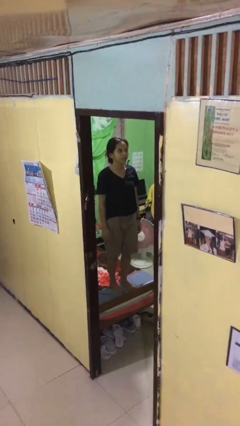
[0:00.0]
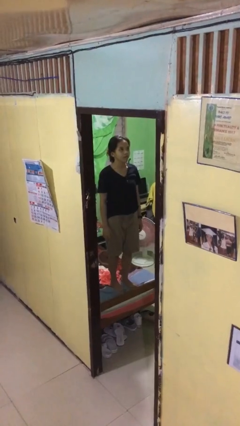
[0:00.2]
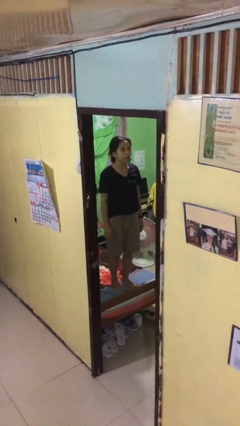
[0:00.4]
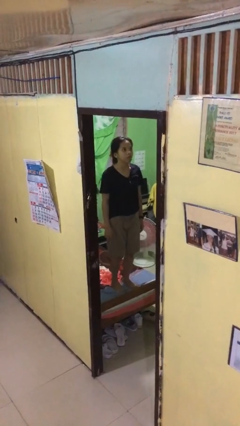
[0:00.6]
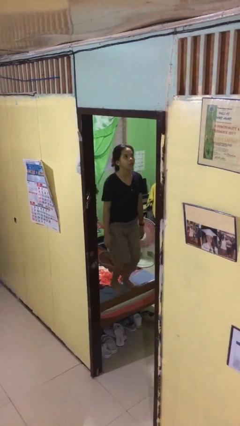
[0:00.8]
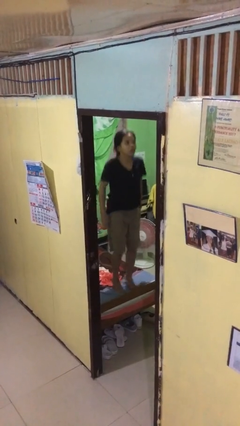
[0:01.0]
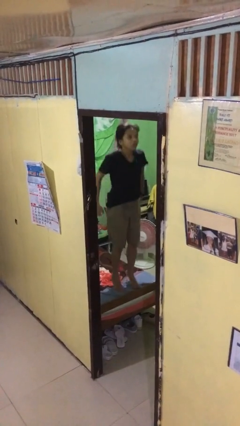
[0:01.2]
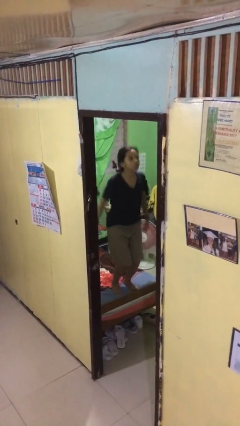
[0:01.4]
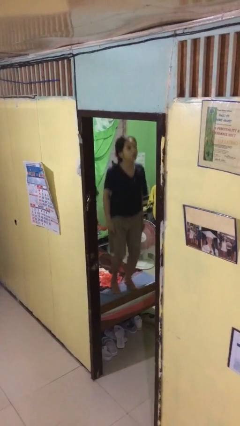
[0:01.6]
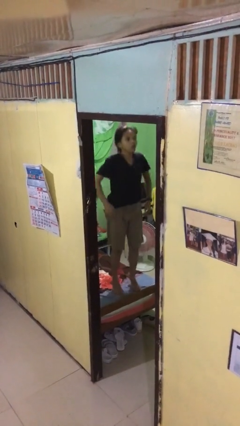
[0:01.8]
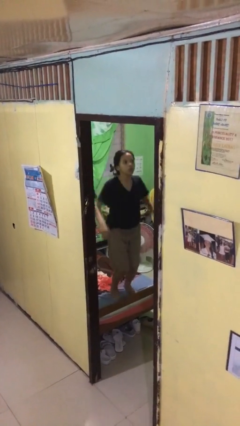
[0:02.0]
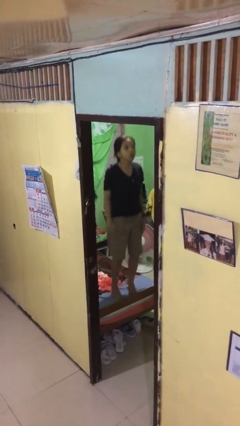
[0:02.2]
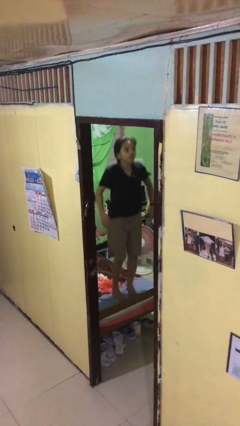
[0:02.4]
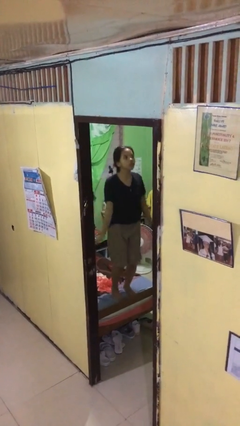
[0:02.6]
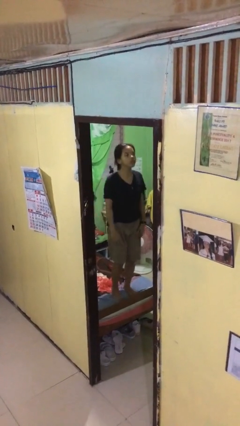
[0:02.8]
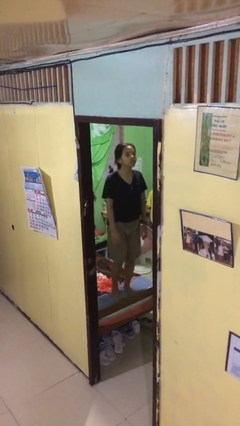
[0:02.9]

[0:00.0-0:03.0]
person jumps on bed

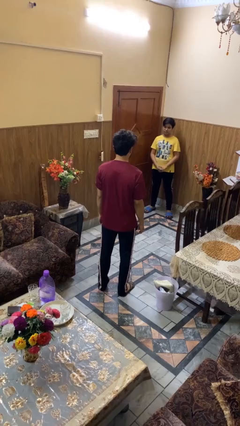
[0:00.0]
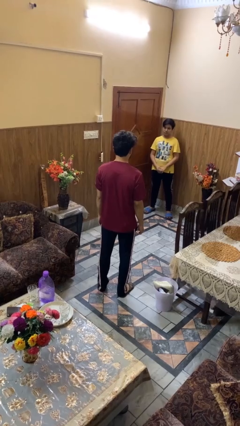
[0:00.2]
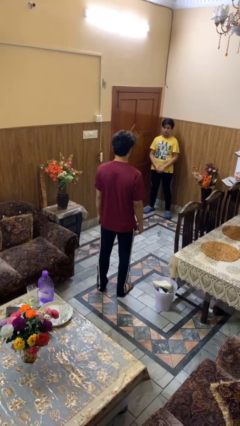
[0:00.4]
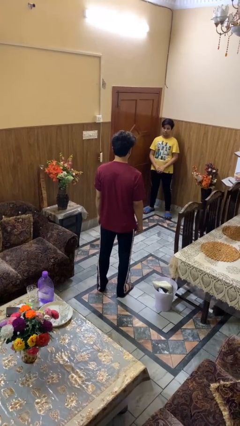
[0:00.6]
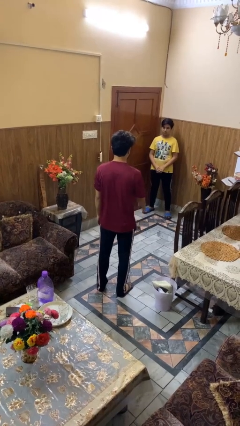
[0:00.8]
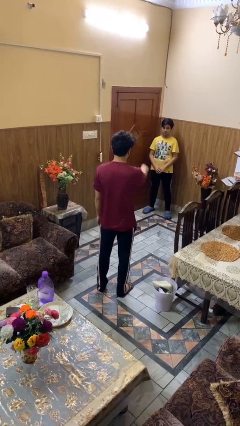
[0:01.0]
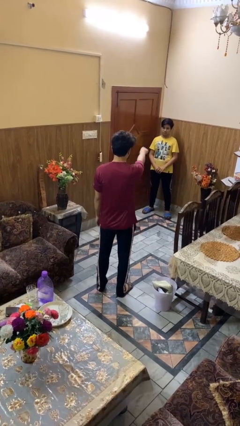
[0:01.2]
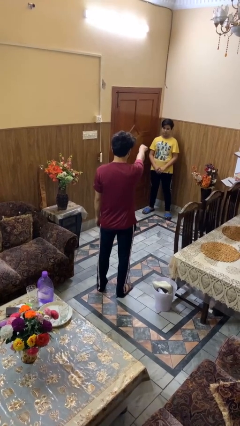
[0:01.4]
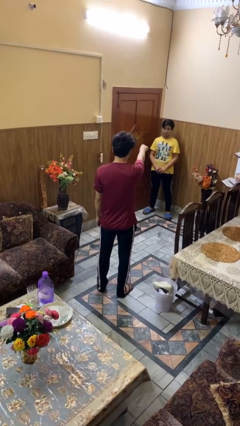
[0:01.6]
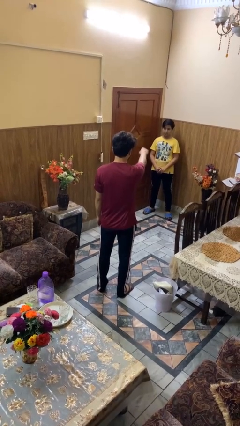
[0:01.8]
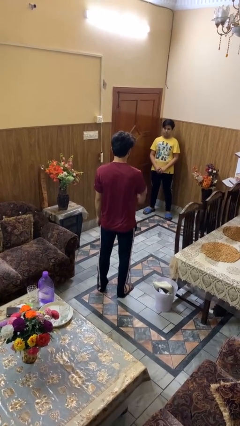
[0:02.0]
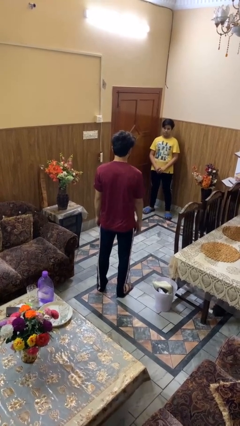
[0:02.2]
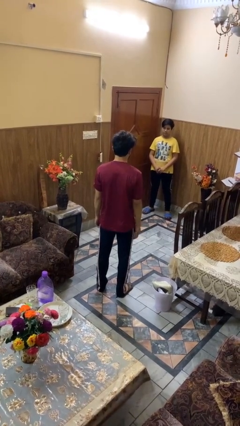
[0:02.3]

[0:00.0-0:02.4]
person points at person

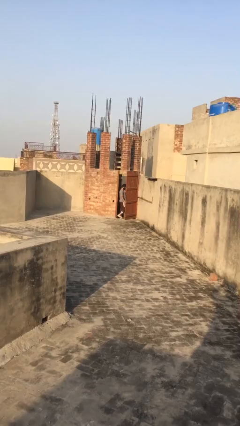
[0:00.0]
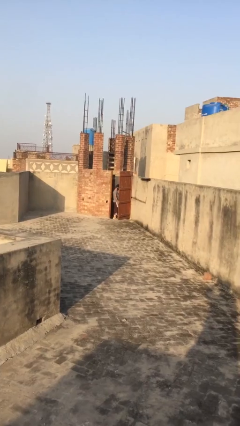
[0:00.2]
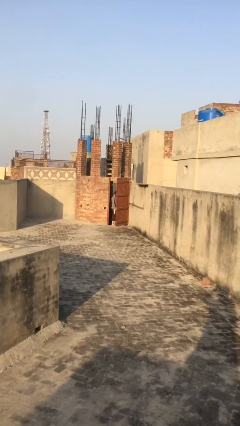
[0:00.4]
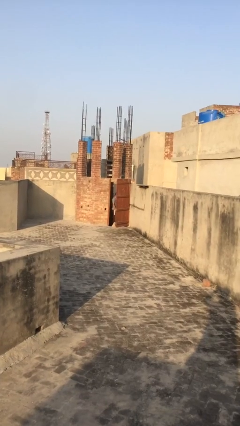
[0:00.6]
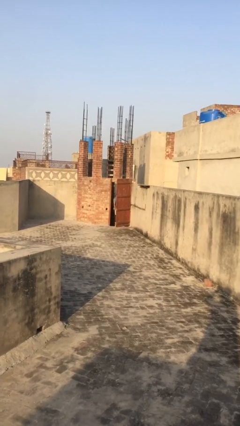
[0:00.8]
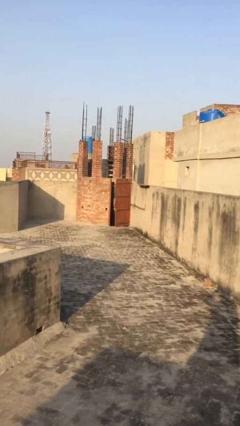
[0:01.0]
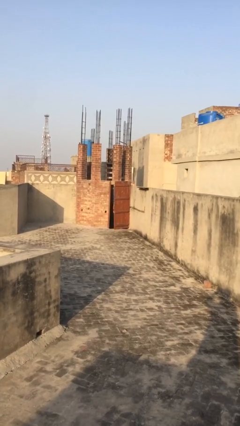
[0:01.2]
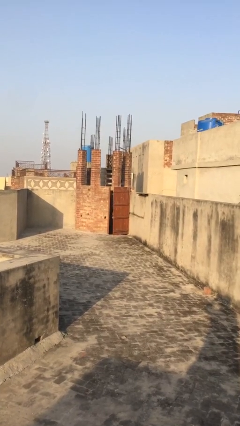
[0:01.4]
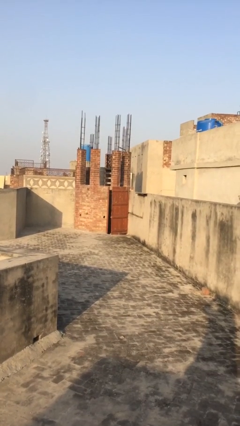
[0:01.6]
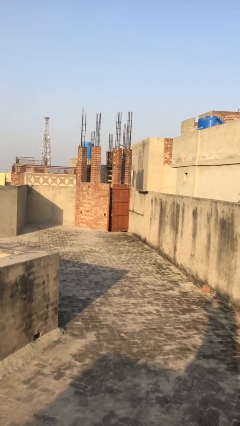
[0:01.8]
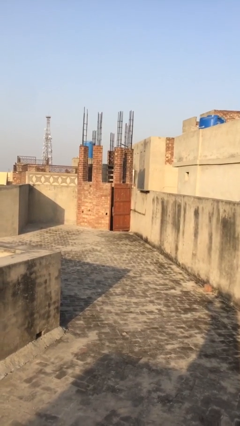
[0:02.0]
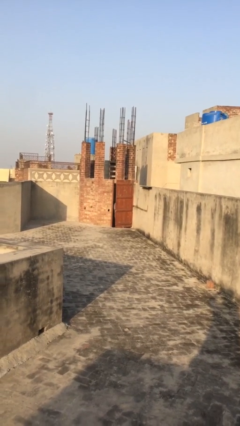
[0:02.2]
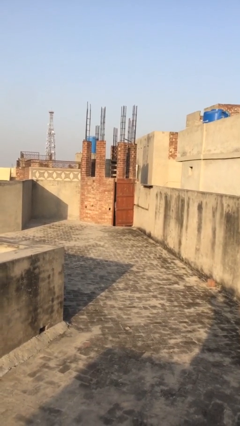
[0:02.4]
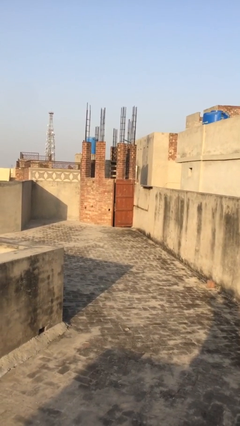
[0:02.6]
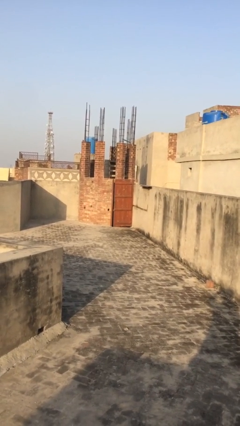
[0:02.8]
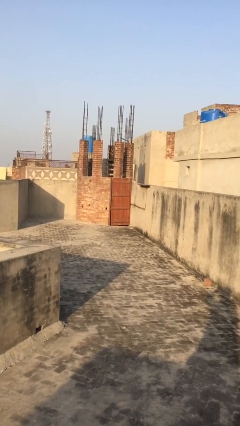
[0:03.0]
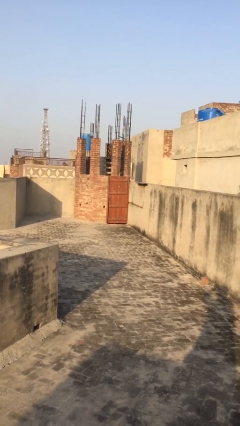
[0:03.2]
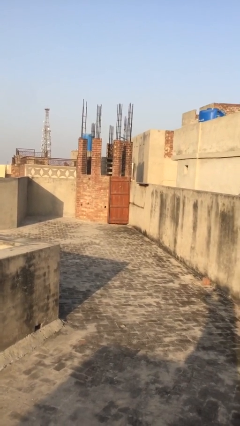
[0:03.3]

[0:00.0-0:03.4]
person closes facility door

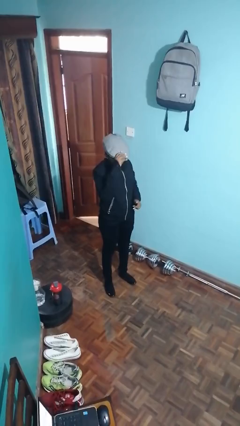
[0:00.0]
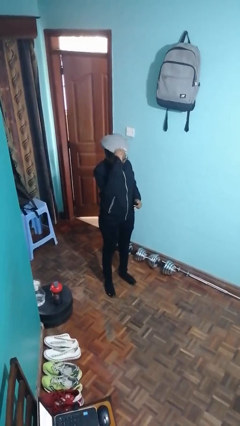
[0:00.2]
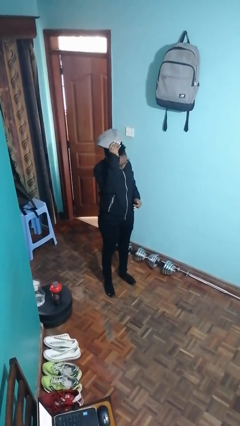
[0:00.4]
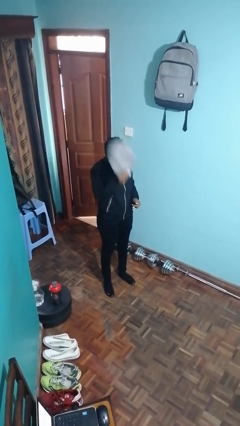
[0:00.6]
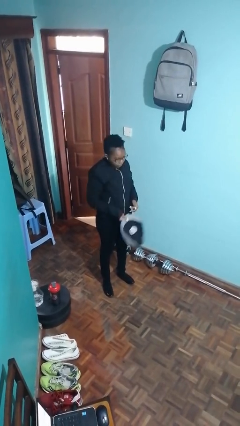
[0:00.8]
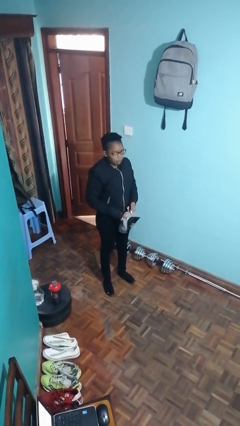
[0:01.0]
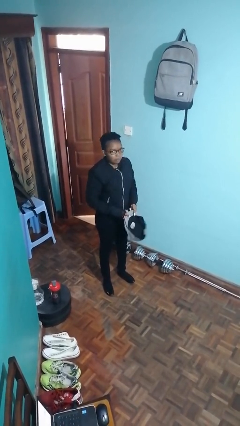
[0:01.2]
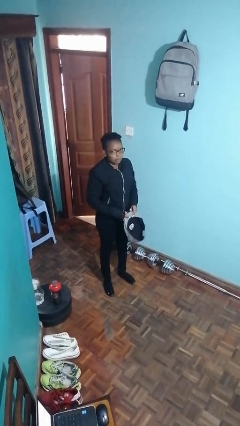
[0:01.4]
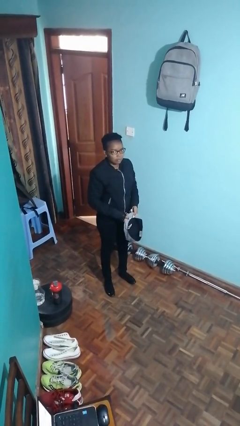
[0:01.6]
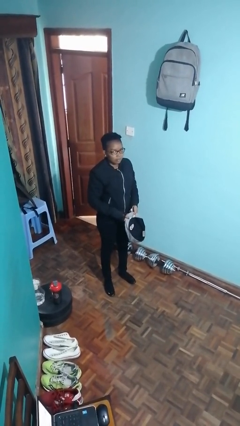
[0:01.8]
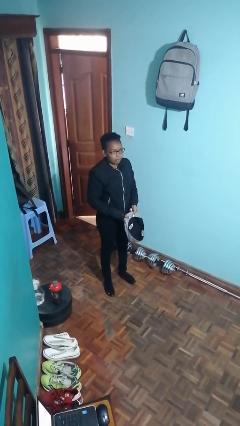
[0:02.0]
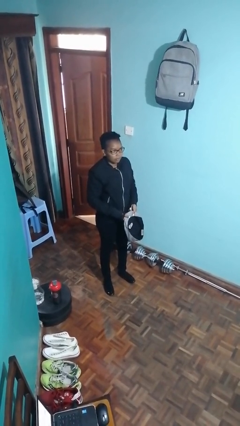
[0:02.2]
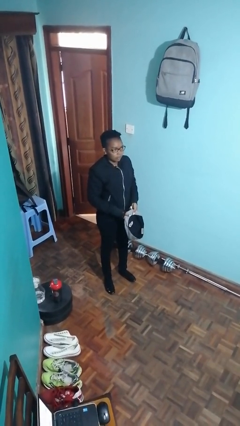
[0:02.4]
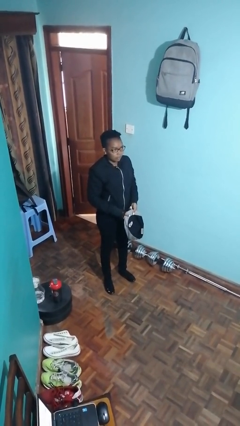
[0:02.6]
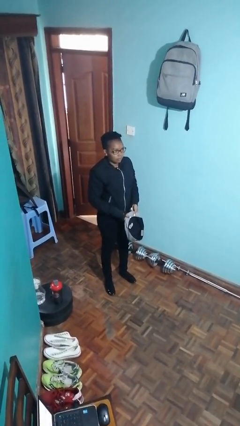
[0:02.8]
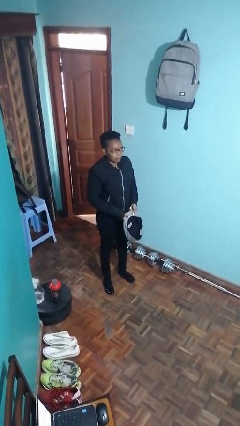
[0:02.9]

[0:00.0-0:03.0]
person takes off hat

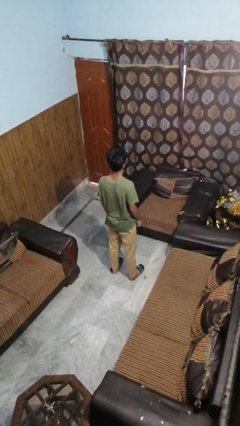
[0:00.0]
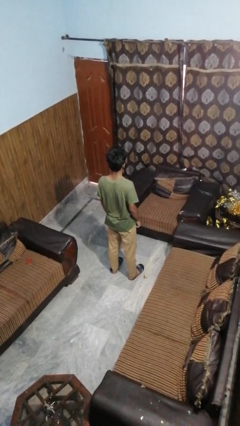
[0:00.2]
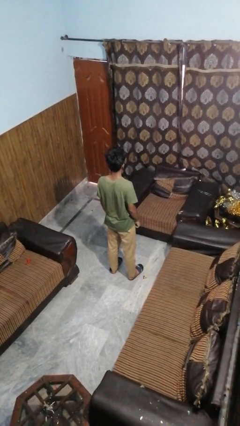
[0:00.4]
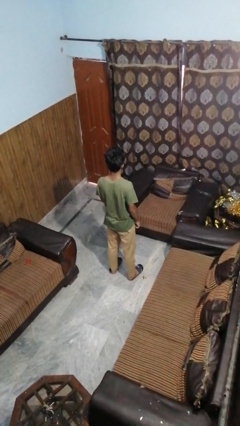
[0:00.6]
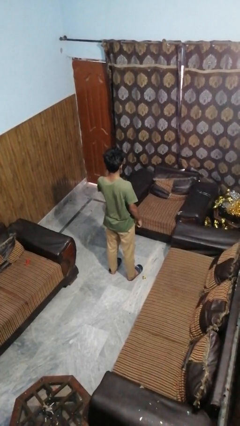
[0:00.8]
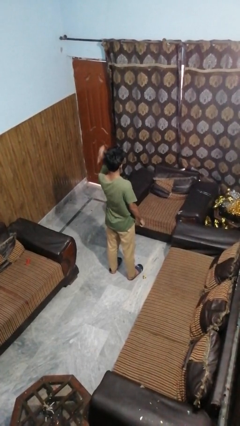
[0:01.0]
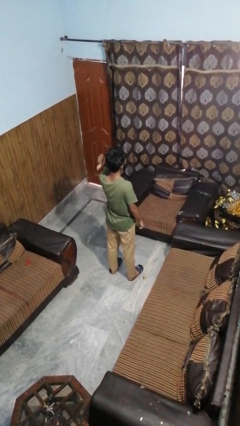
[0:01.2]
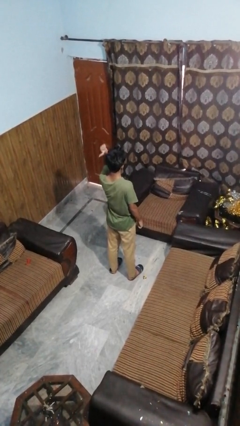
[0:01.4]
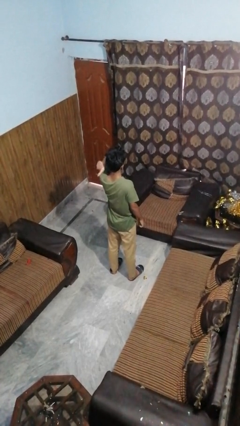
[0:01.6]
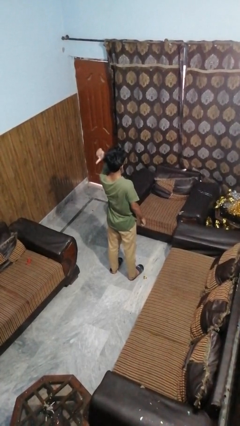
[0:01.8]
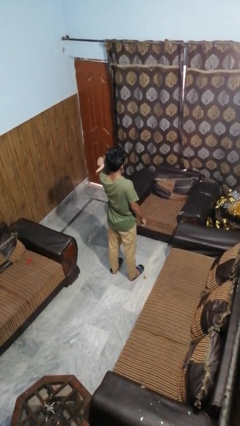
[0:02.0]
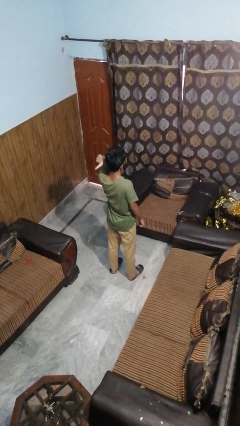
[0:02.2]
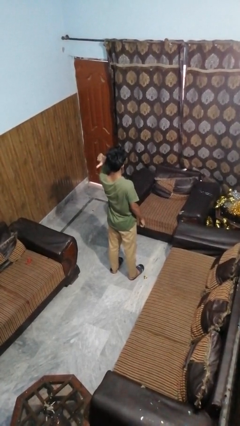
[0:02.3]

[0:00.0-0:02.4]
person gestures behind me

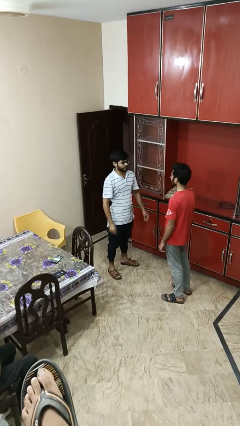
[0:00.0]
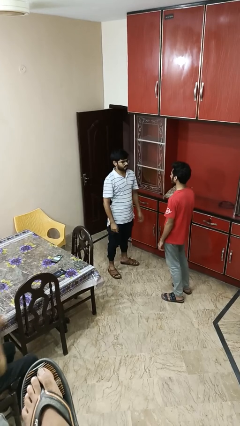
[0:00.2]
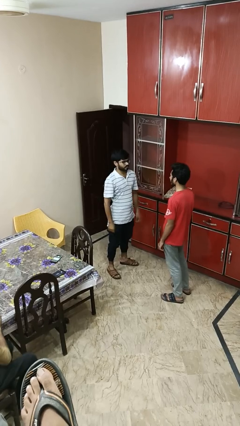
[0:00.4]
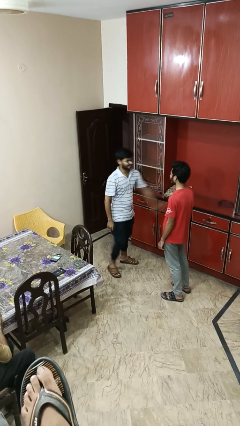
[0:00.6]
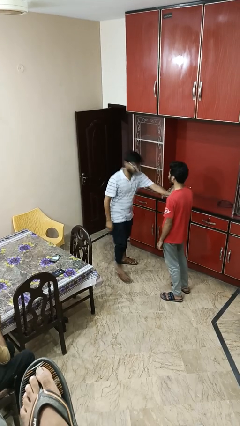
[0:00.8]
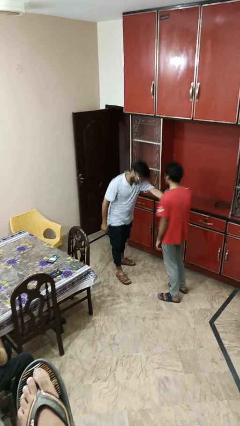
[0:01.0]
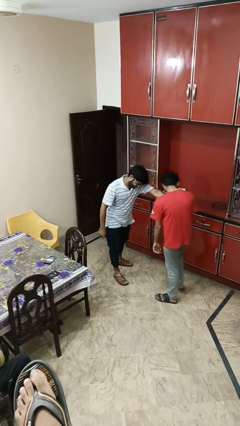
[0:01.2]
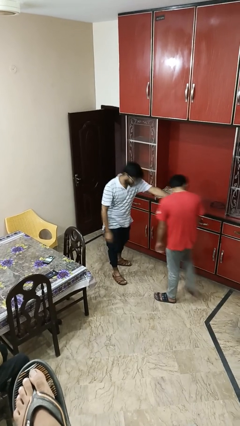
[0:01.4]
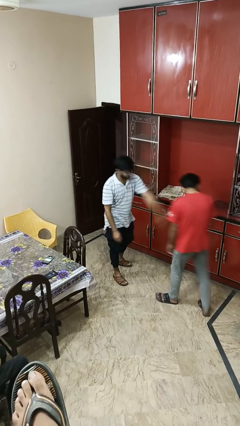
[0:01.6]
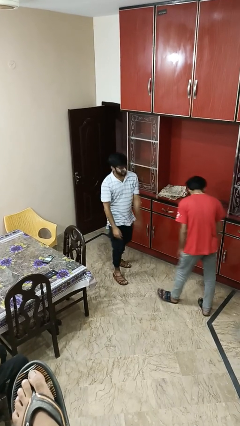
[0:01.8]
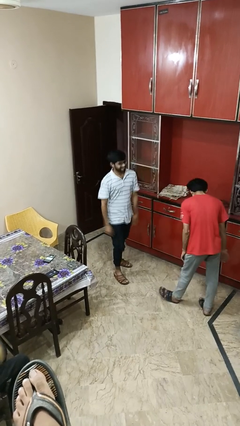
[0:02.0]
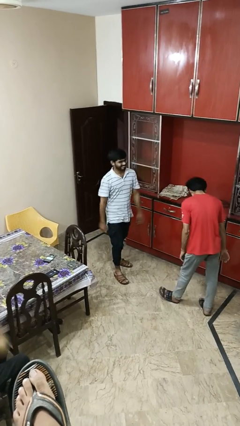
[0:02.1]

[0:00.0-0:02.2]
person shoves person

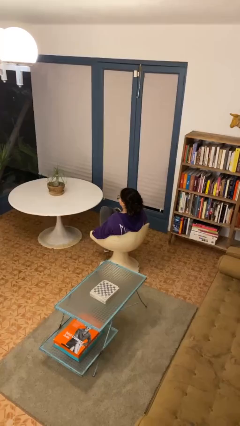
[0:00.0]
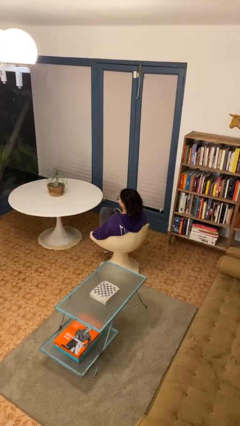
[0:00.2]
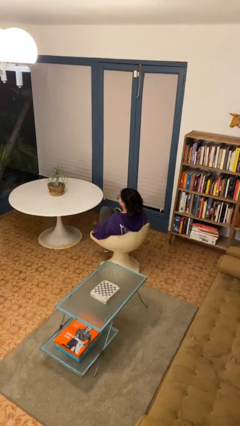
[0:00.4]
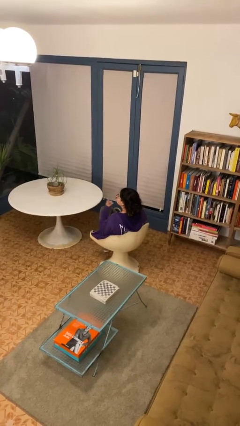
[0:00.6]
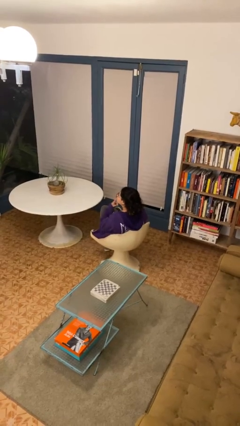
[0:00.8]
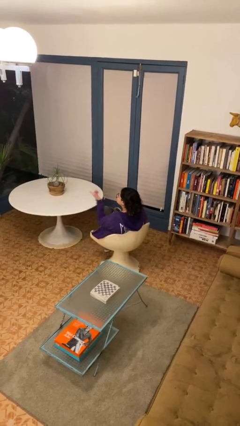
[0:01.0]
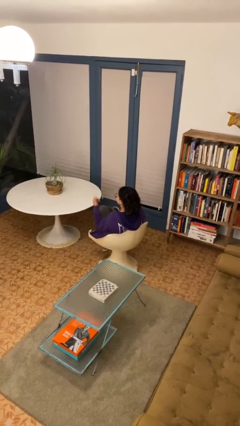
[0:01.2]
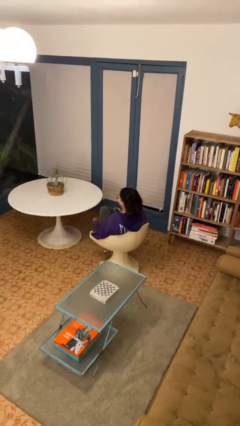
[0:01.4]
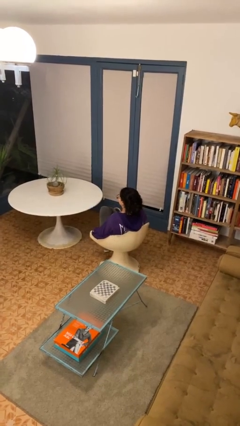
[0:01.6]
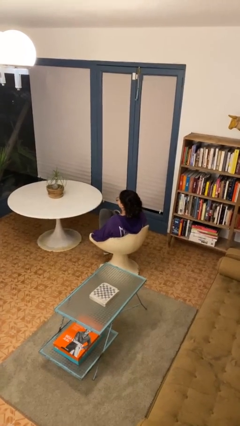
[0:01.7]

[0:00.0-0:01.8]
person gestures blow kiss
